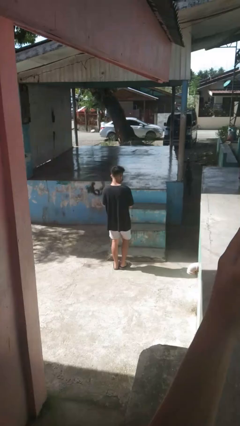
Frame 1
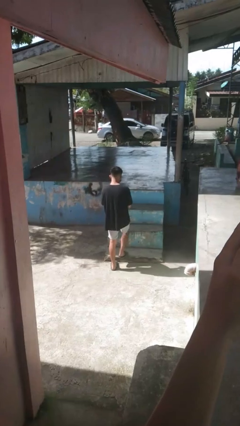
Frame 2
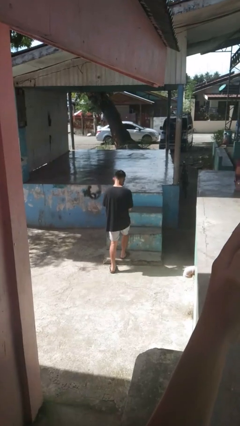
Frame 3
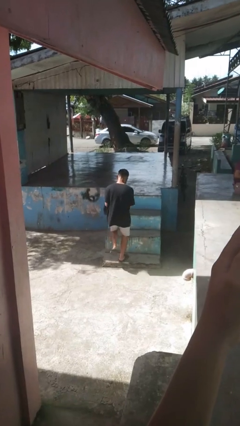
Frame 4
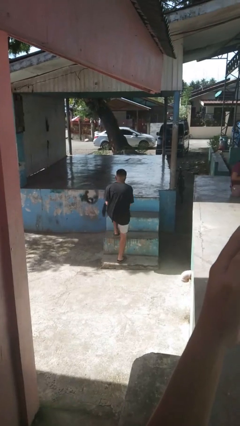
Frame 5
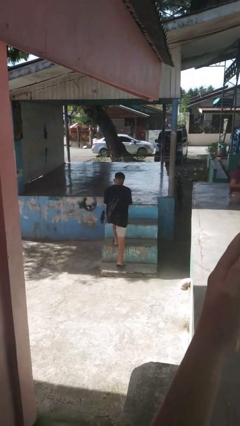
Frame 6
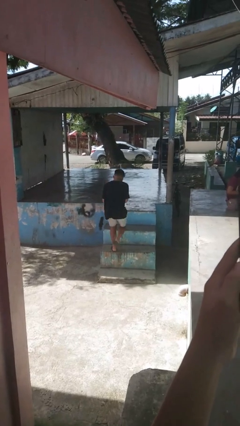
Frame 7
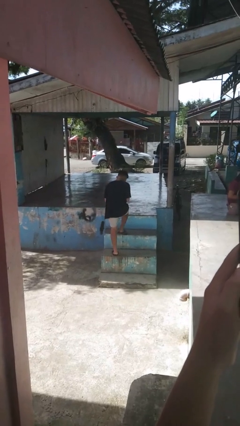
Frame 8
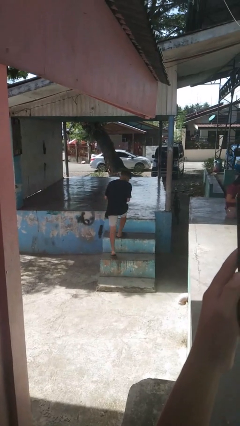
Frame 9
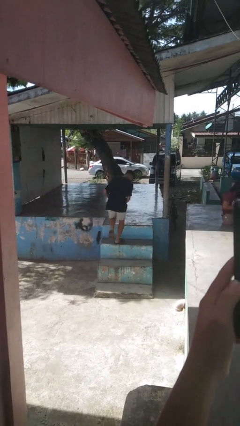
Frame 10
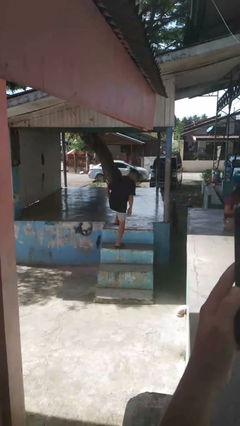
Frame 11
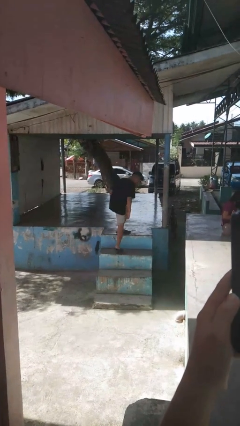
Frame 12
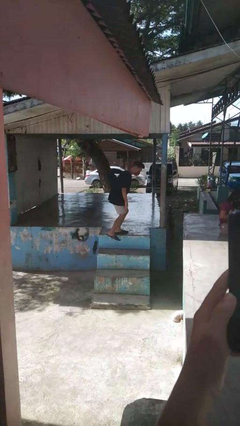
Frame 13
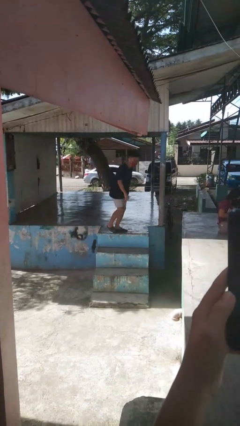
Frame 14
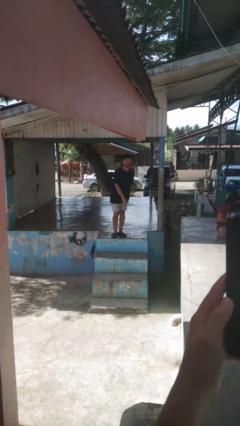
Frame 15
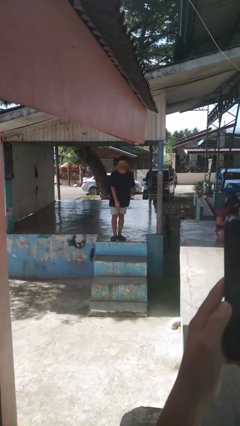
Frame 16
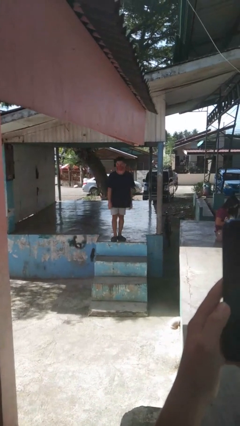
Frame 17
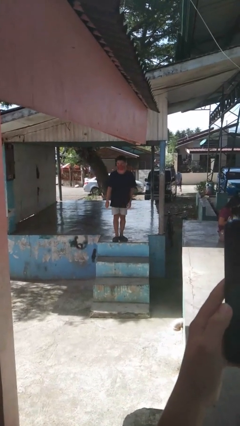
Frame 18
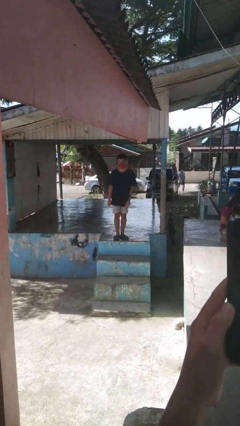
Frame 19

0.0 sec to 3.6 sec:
person climbs up stairs

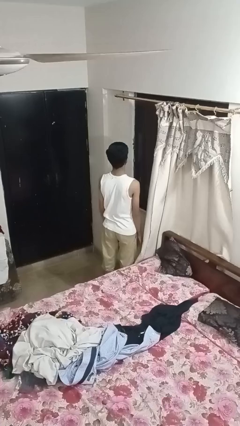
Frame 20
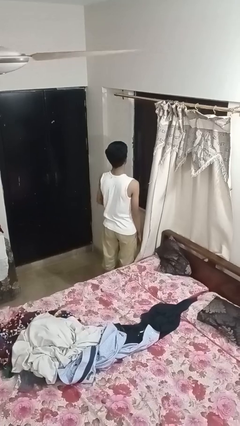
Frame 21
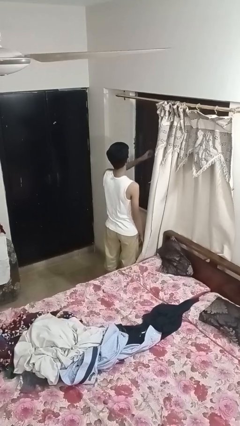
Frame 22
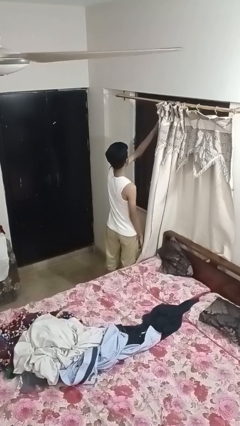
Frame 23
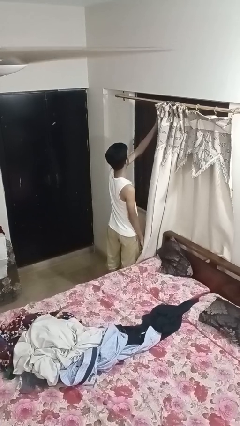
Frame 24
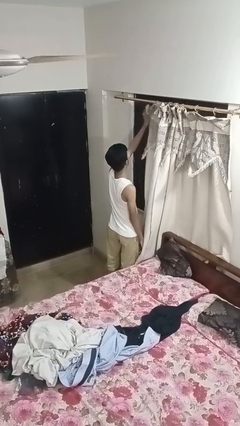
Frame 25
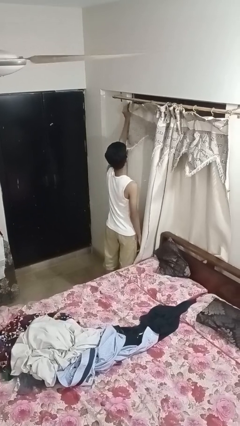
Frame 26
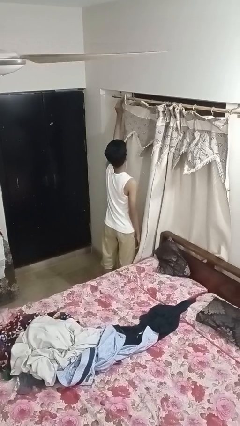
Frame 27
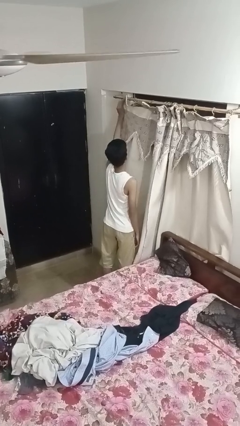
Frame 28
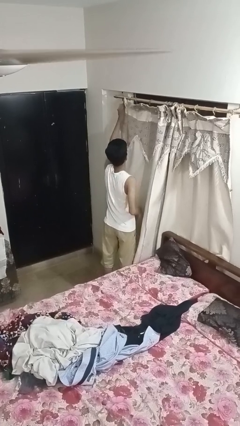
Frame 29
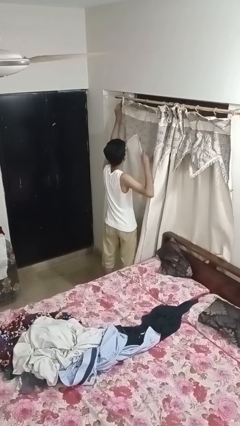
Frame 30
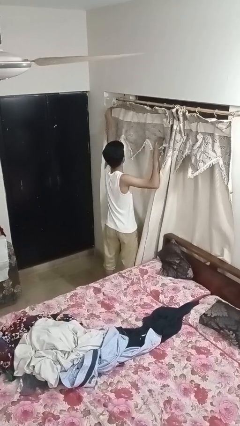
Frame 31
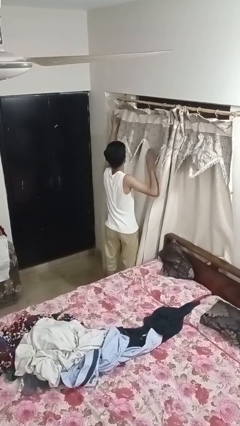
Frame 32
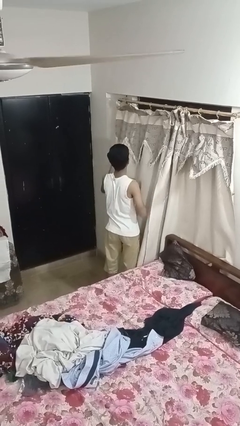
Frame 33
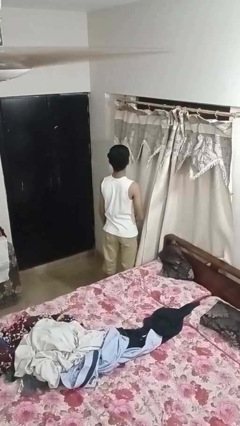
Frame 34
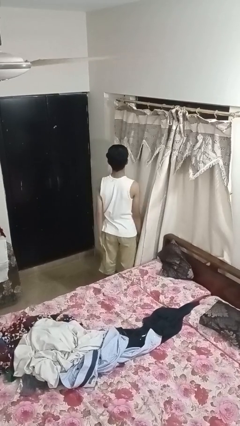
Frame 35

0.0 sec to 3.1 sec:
person closes curtains

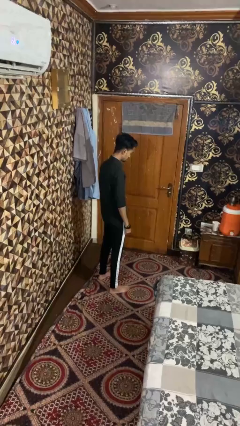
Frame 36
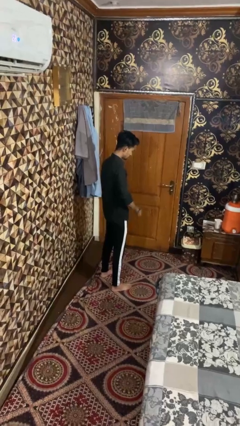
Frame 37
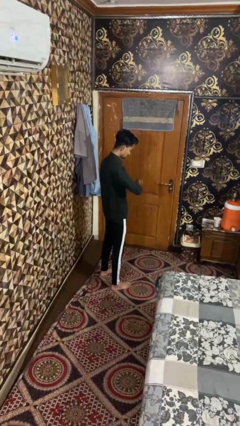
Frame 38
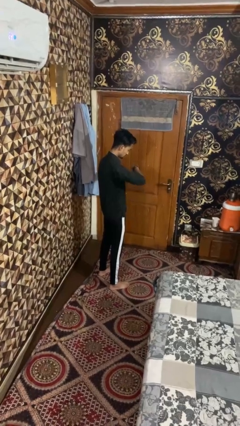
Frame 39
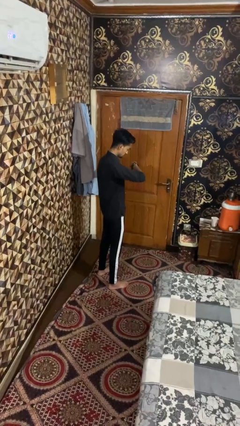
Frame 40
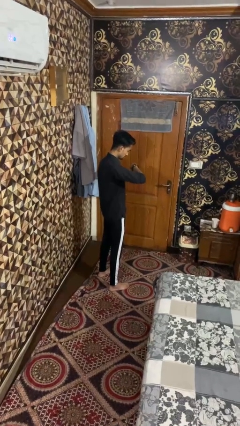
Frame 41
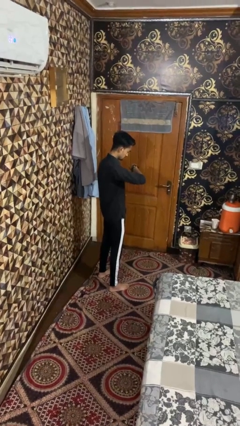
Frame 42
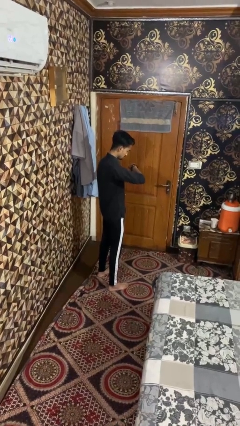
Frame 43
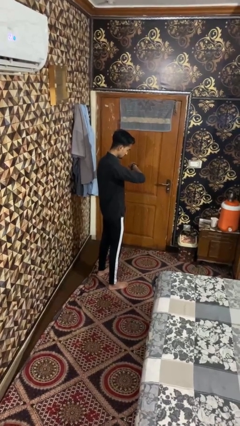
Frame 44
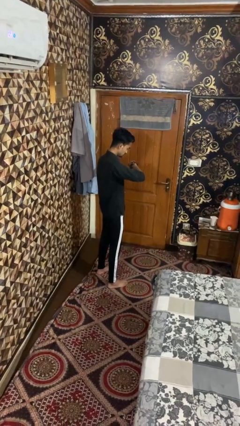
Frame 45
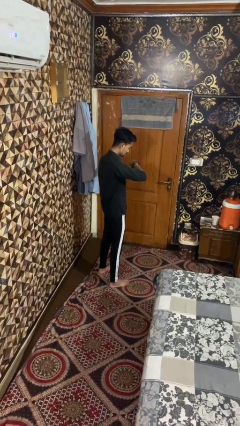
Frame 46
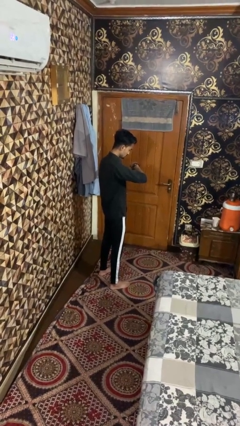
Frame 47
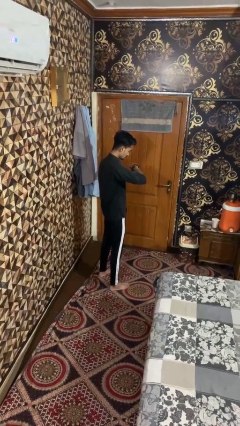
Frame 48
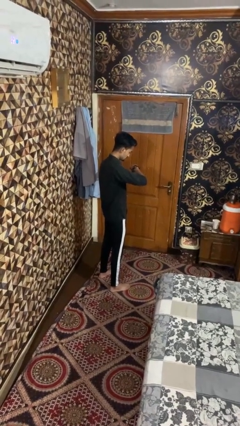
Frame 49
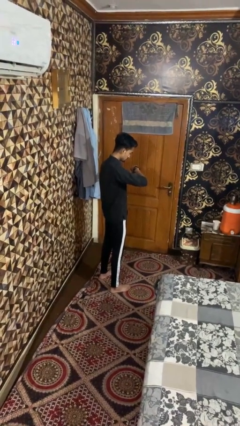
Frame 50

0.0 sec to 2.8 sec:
person looks at wristwatch

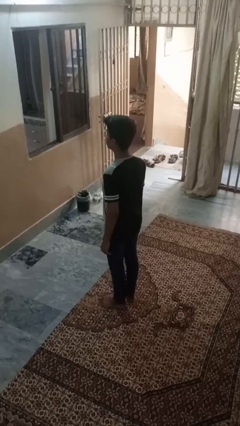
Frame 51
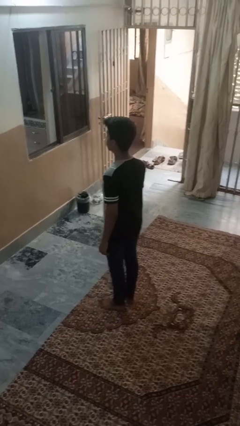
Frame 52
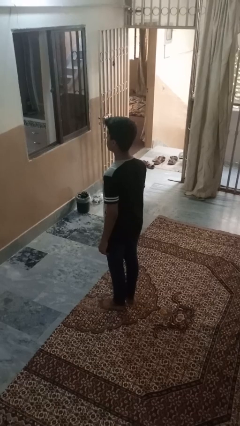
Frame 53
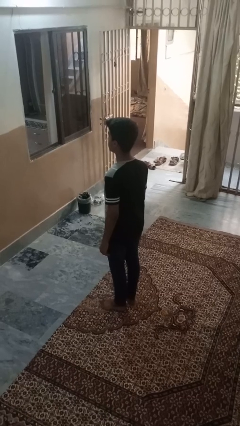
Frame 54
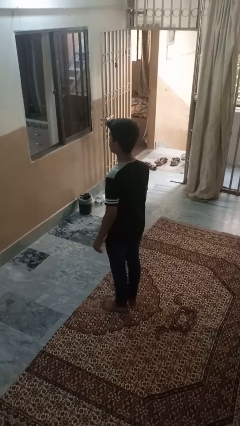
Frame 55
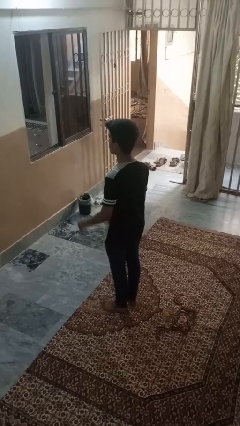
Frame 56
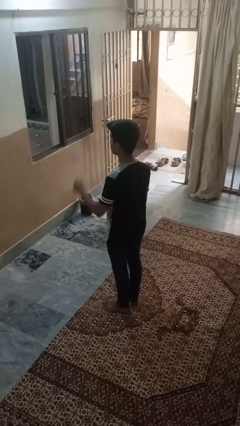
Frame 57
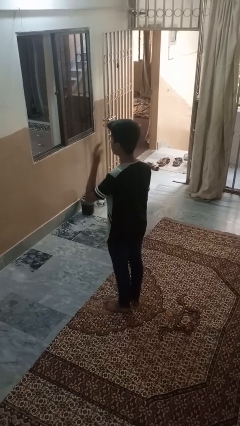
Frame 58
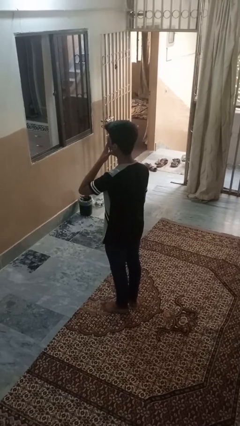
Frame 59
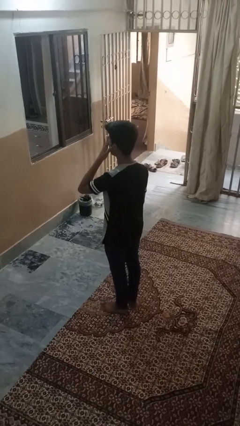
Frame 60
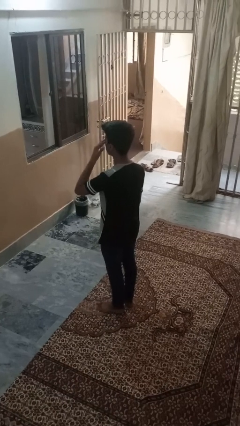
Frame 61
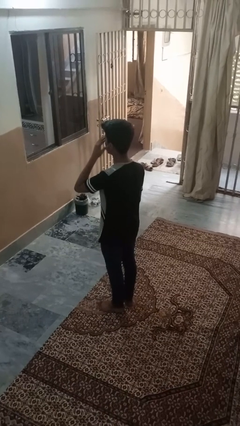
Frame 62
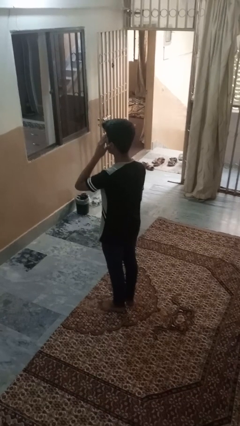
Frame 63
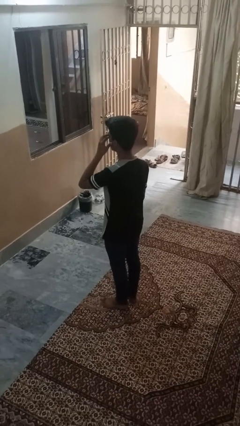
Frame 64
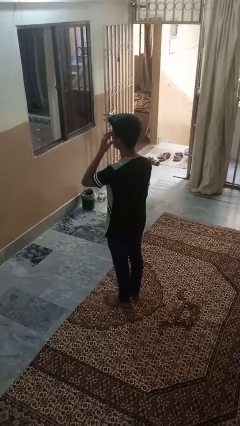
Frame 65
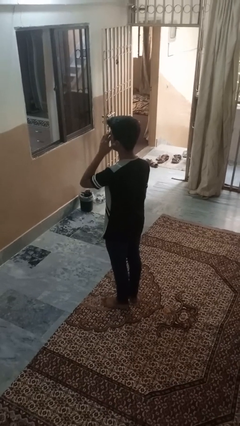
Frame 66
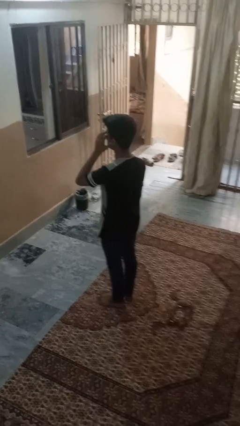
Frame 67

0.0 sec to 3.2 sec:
person rubs eyes

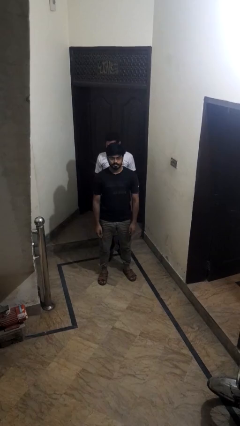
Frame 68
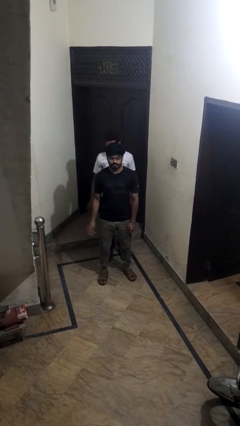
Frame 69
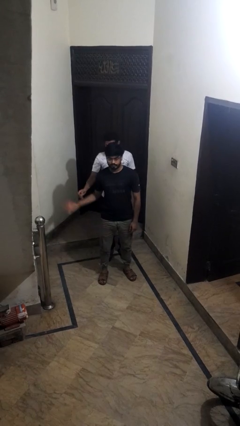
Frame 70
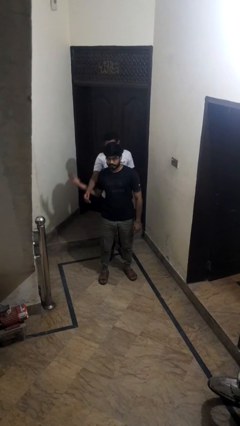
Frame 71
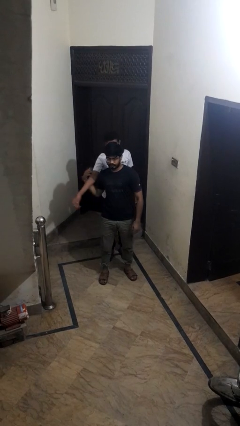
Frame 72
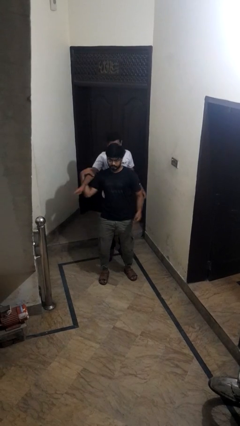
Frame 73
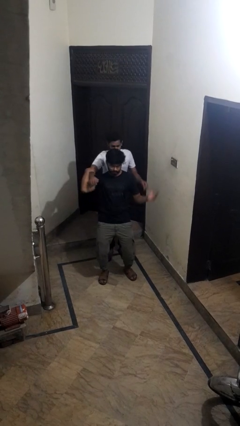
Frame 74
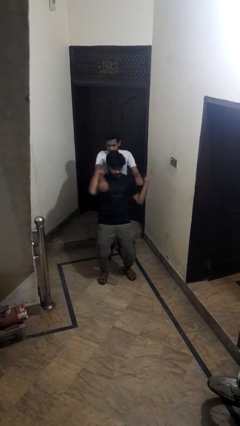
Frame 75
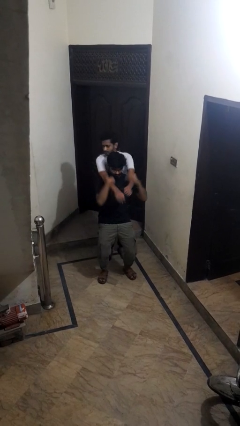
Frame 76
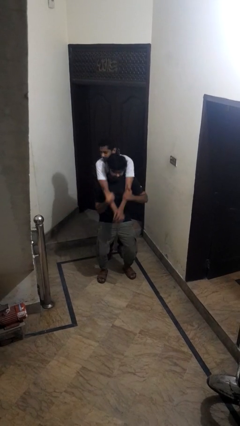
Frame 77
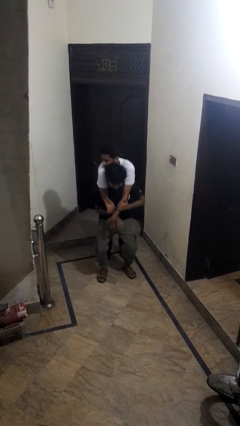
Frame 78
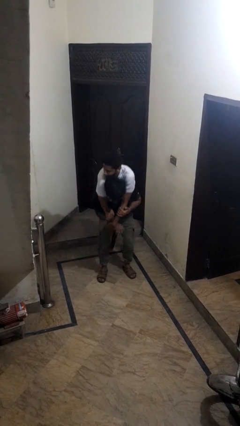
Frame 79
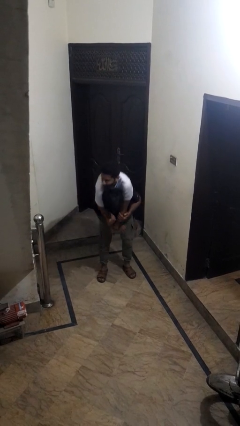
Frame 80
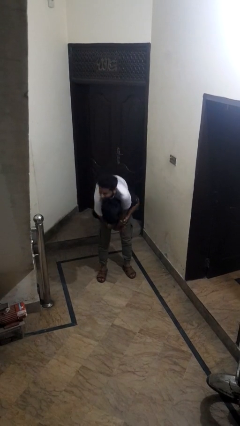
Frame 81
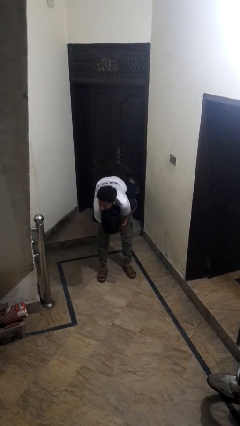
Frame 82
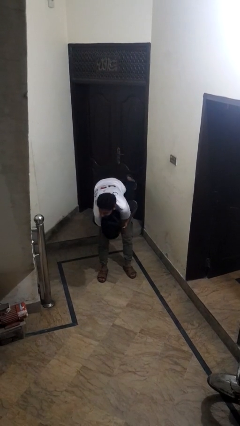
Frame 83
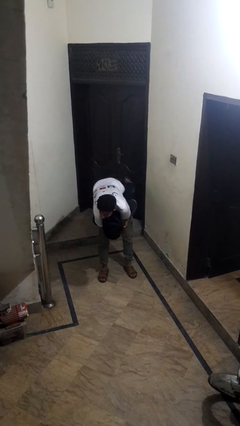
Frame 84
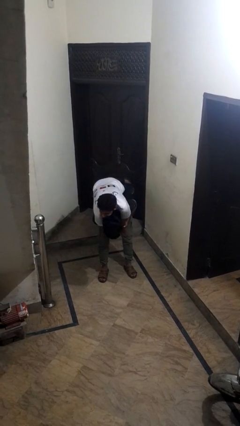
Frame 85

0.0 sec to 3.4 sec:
person carries person over shoulder

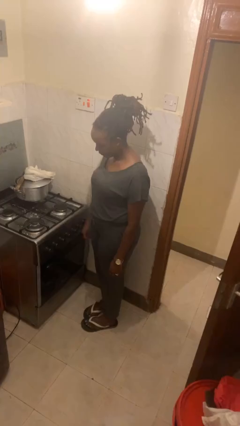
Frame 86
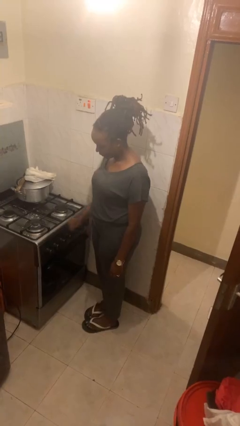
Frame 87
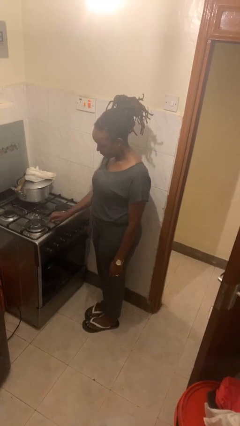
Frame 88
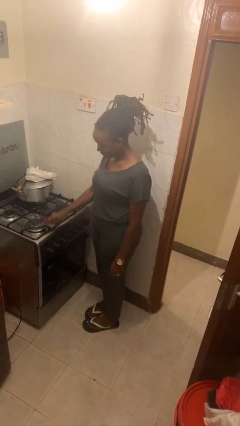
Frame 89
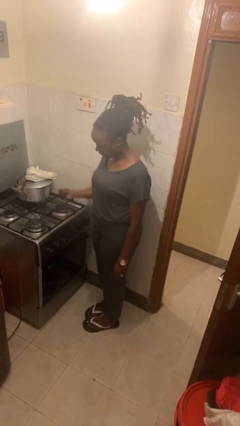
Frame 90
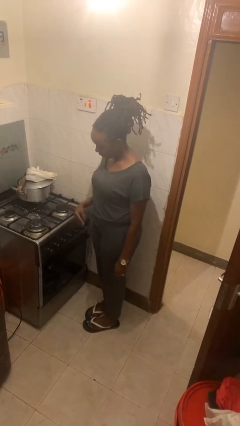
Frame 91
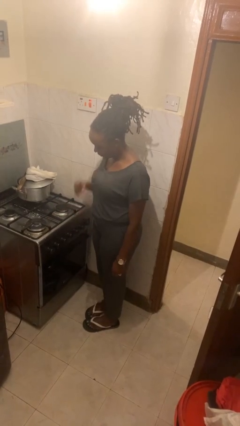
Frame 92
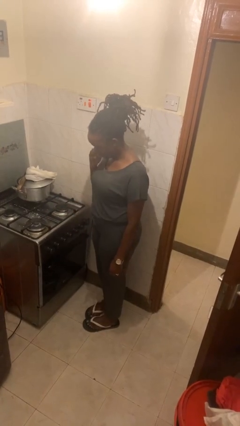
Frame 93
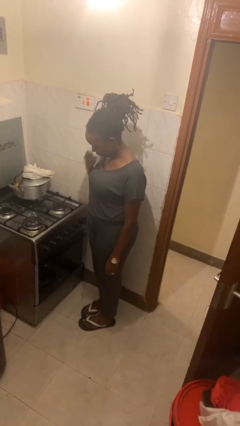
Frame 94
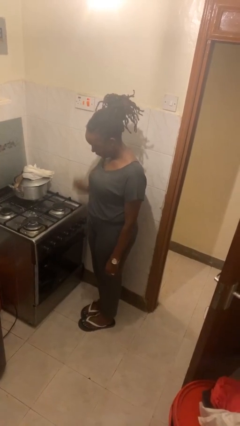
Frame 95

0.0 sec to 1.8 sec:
person burns hand
